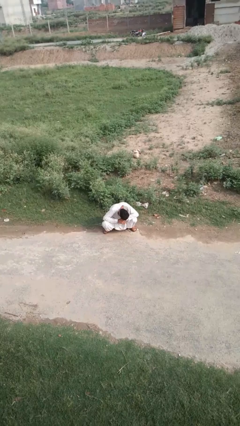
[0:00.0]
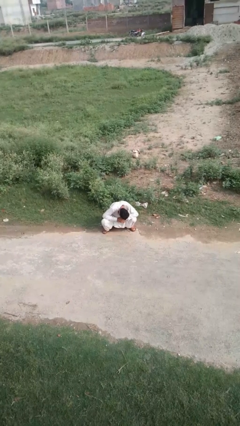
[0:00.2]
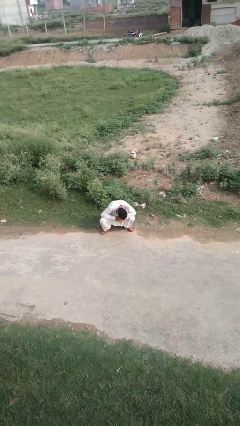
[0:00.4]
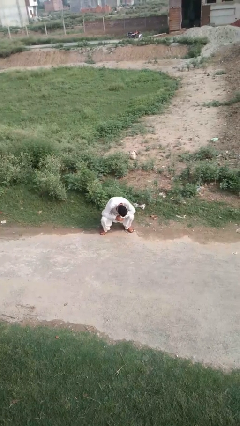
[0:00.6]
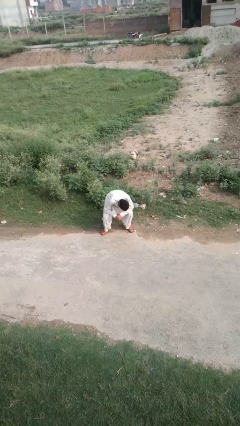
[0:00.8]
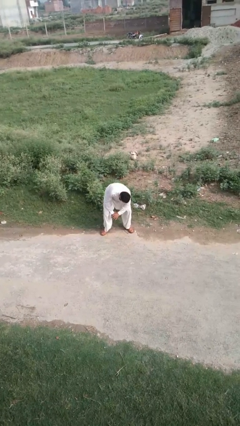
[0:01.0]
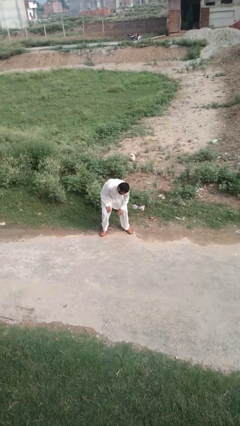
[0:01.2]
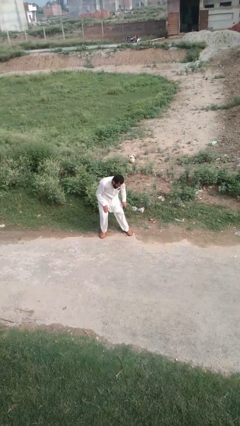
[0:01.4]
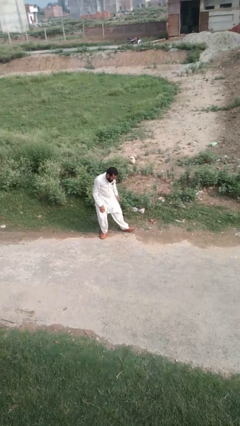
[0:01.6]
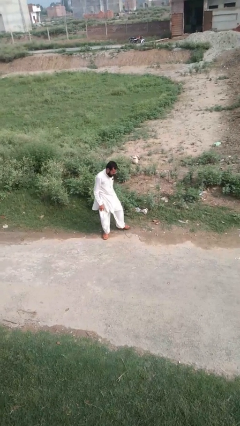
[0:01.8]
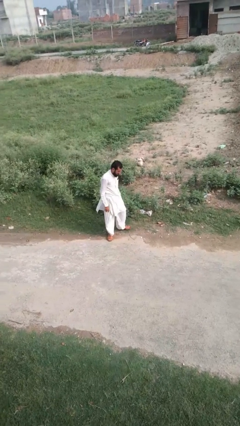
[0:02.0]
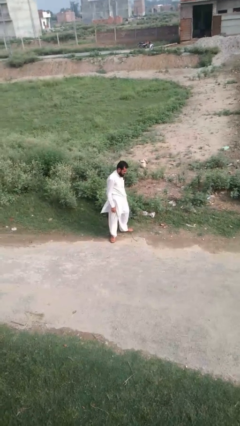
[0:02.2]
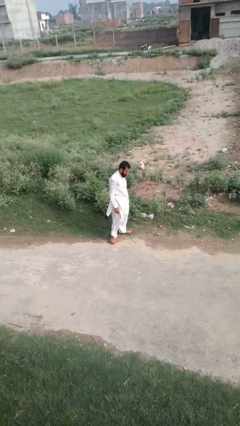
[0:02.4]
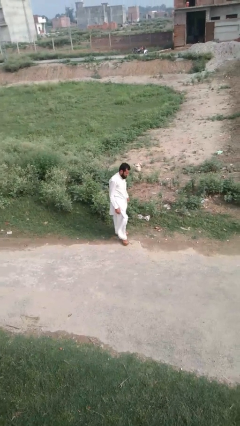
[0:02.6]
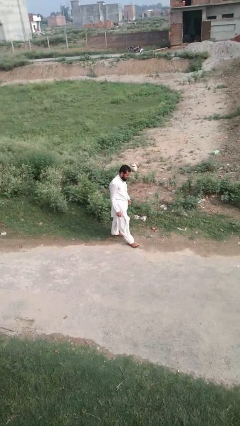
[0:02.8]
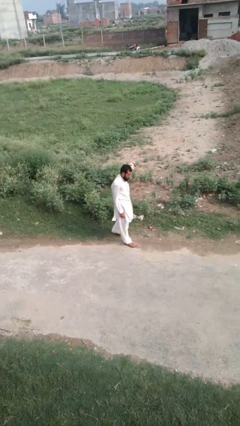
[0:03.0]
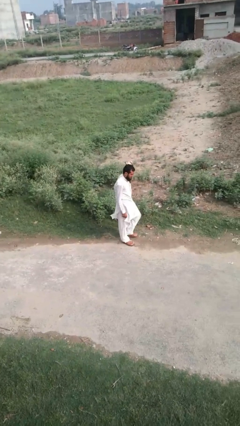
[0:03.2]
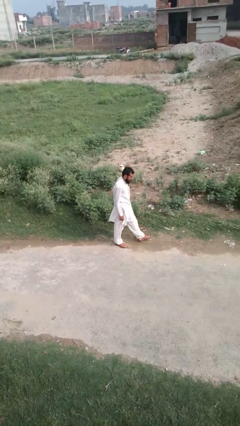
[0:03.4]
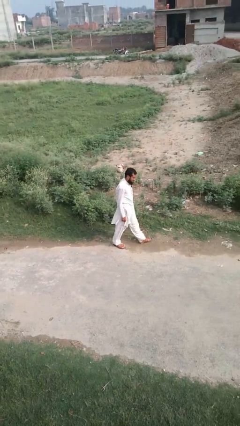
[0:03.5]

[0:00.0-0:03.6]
person stands up from floor

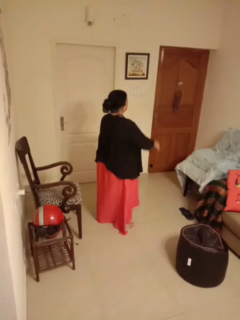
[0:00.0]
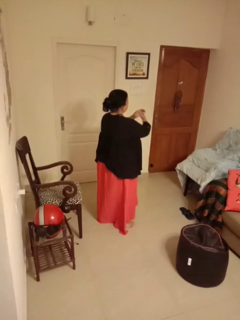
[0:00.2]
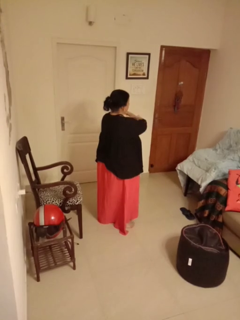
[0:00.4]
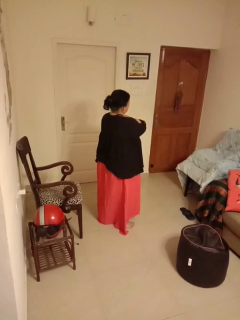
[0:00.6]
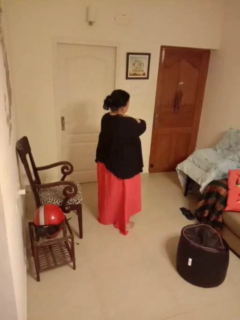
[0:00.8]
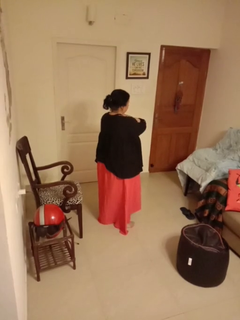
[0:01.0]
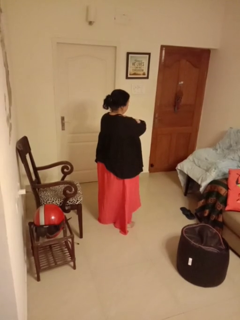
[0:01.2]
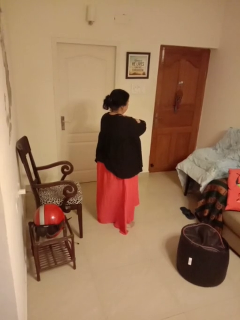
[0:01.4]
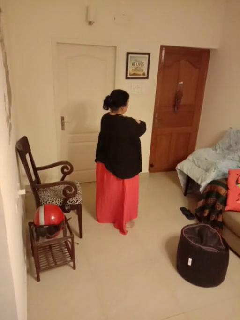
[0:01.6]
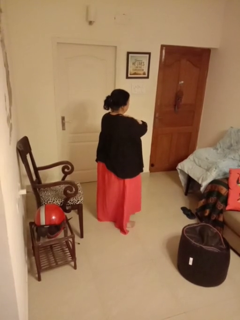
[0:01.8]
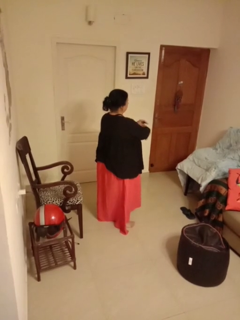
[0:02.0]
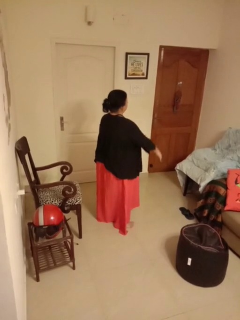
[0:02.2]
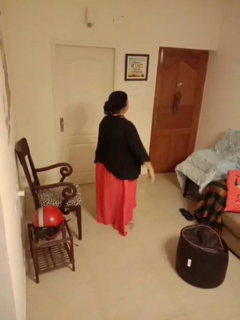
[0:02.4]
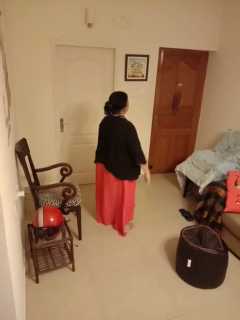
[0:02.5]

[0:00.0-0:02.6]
person gestures arms x

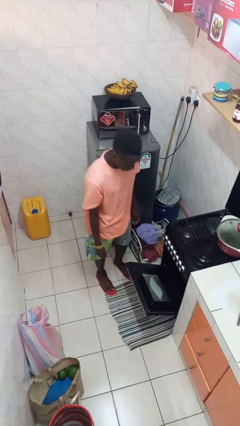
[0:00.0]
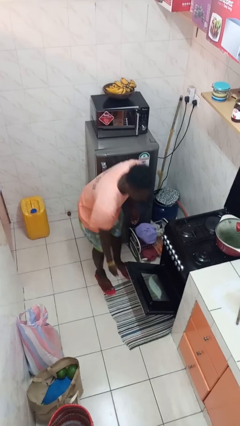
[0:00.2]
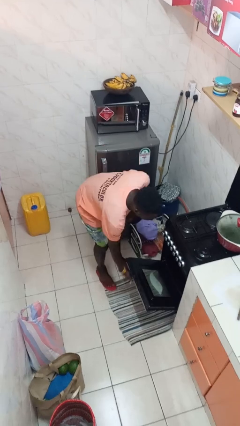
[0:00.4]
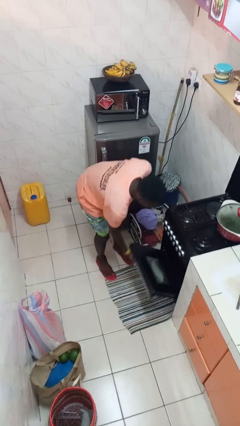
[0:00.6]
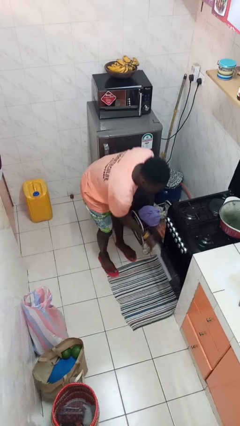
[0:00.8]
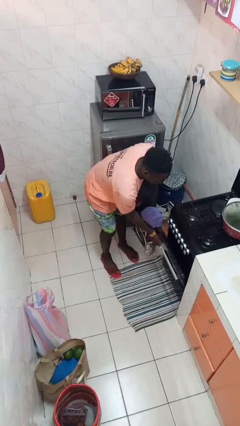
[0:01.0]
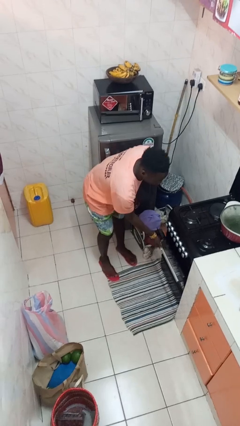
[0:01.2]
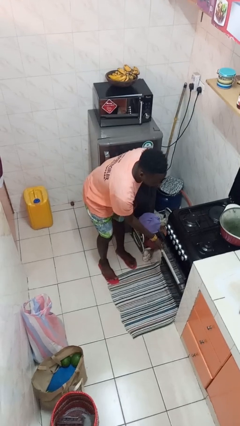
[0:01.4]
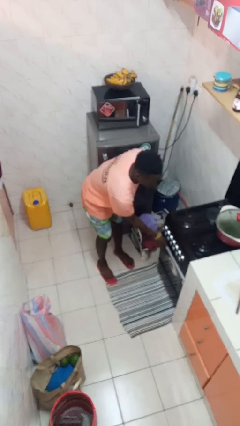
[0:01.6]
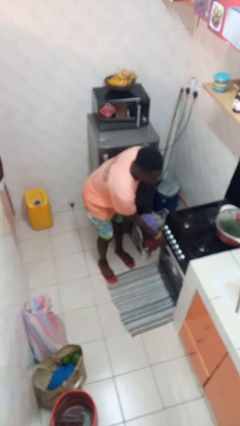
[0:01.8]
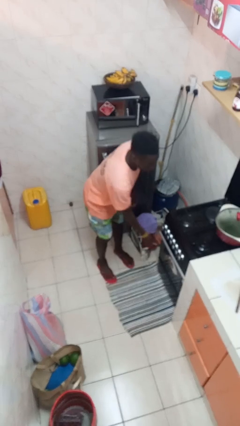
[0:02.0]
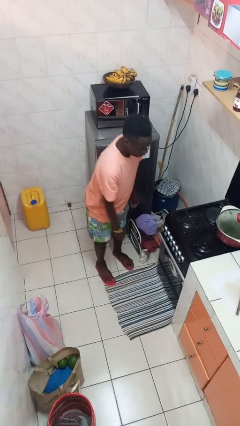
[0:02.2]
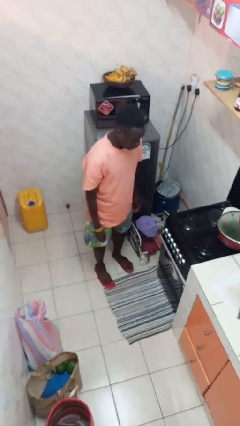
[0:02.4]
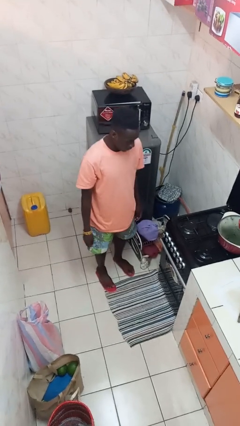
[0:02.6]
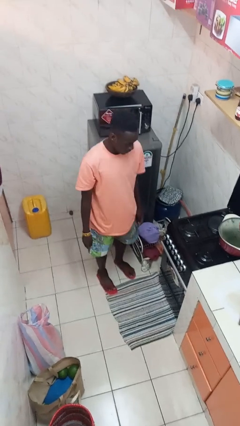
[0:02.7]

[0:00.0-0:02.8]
person closes oven door

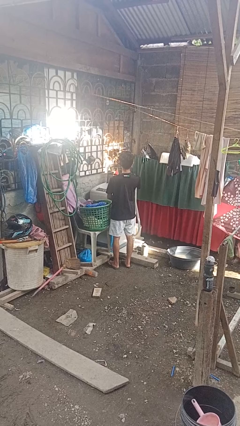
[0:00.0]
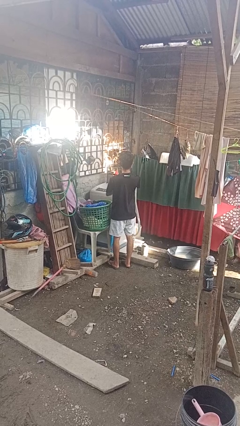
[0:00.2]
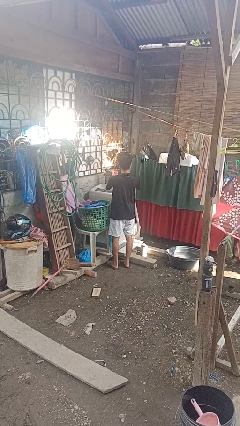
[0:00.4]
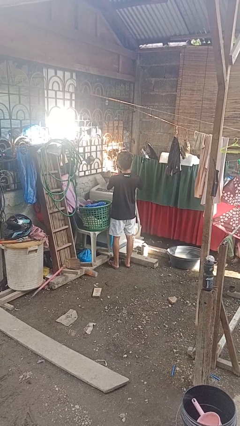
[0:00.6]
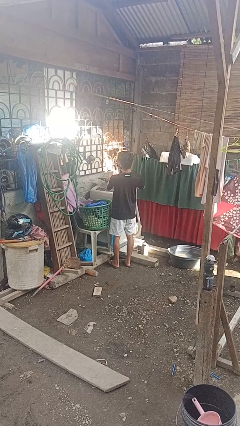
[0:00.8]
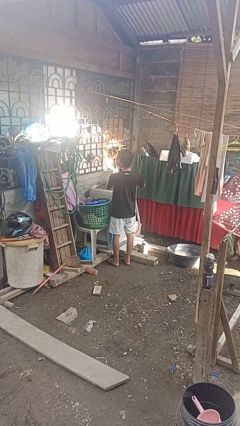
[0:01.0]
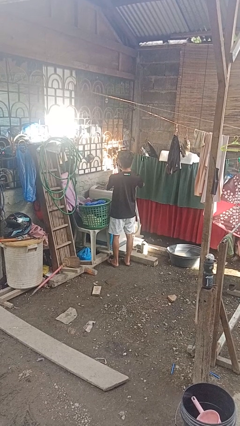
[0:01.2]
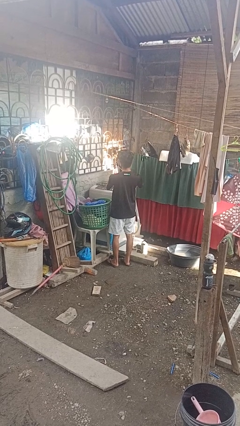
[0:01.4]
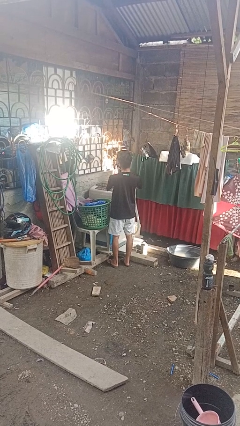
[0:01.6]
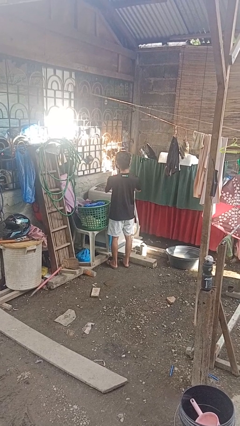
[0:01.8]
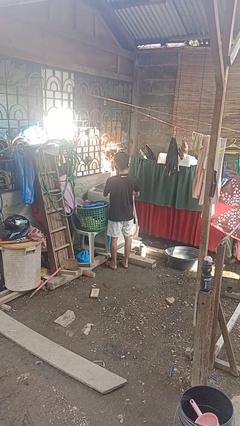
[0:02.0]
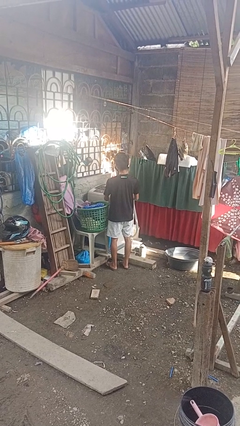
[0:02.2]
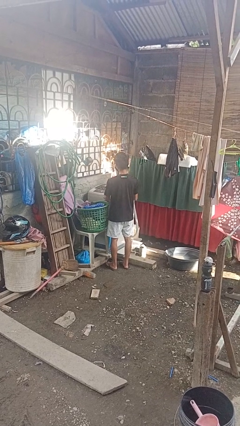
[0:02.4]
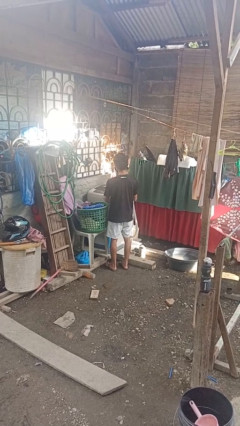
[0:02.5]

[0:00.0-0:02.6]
person closes clothes washer

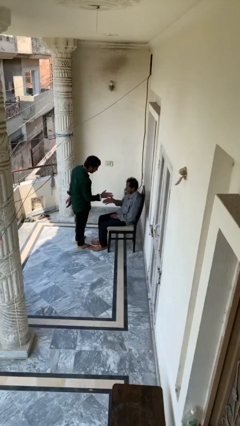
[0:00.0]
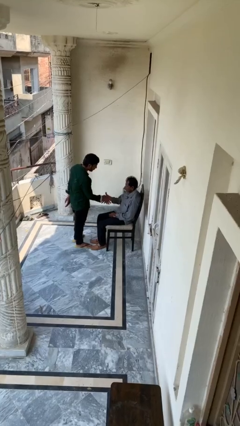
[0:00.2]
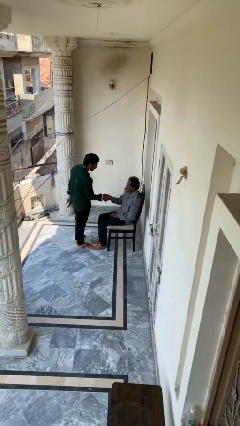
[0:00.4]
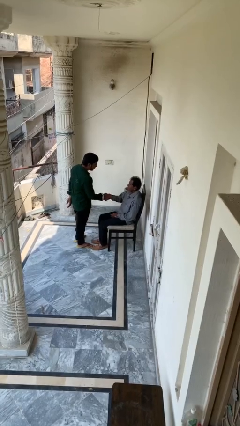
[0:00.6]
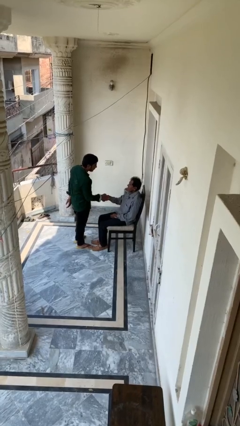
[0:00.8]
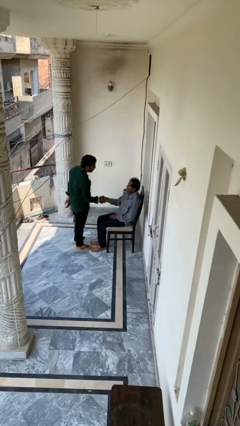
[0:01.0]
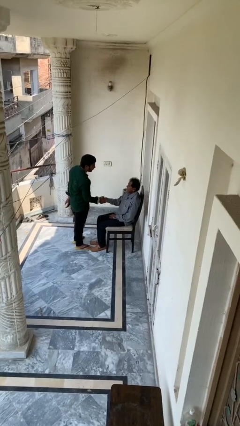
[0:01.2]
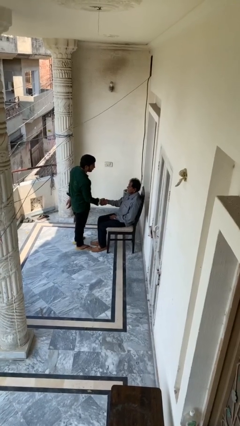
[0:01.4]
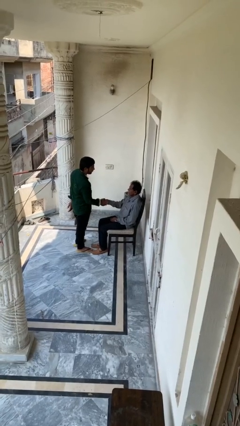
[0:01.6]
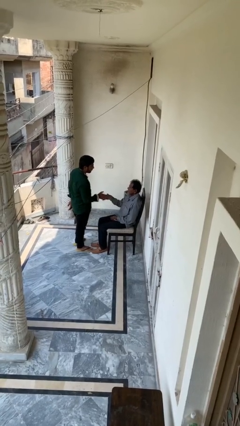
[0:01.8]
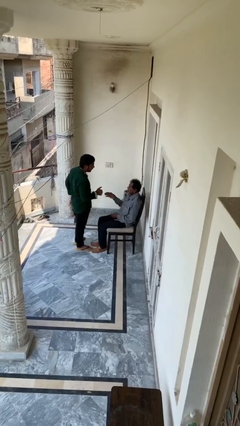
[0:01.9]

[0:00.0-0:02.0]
person shakes hand

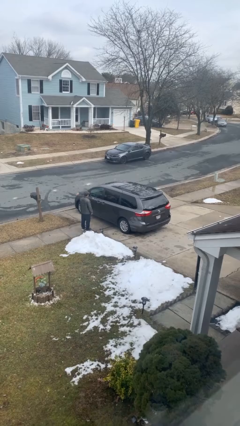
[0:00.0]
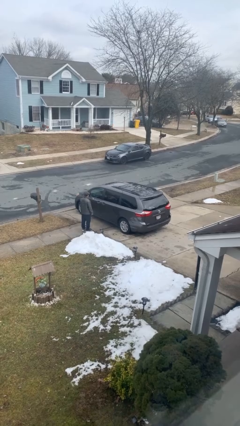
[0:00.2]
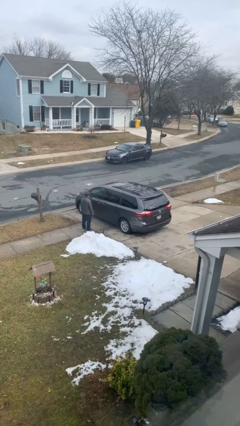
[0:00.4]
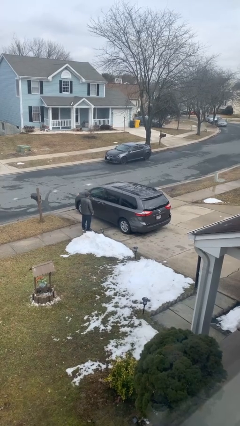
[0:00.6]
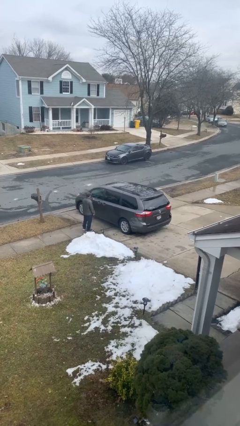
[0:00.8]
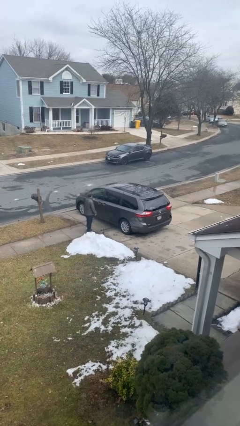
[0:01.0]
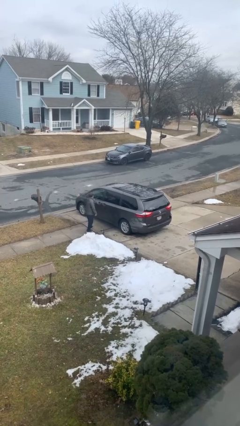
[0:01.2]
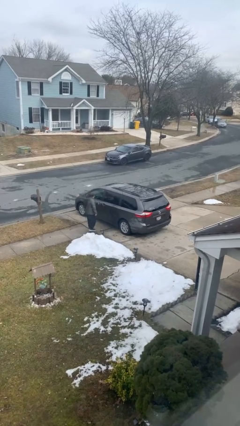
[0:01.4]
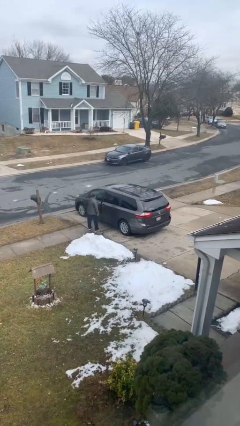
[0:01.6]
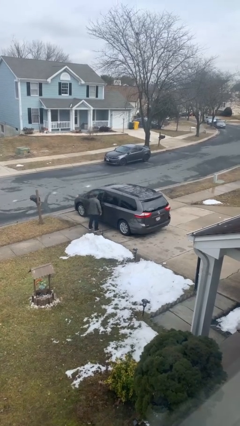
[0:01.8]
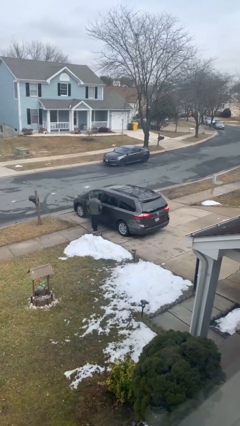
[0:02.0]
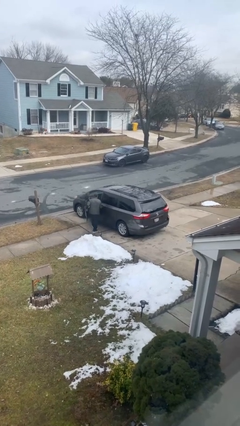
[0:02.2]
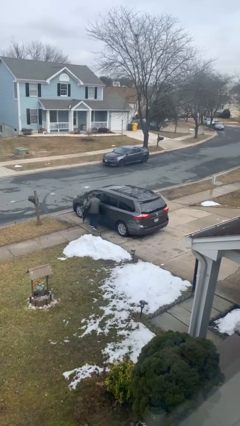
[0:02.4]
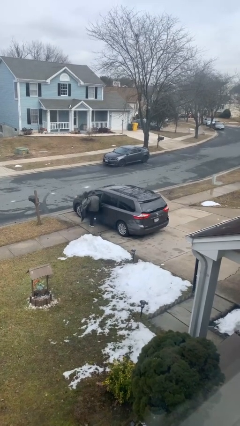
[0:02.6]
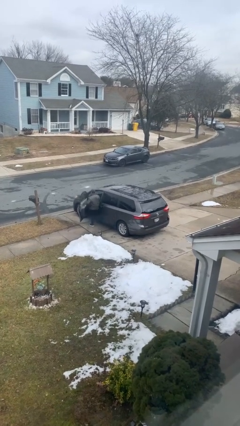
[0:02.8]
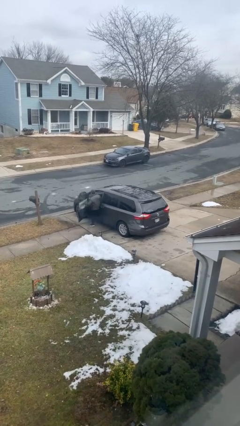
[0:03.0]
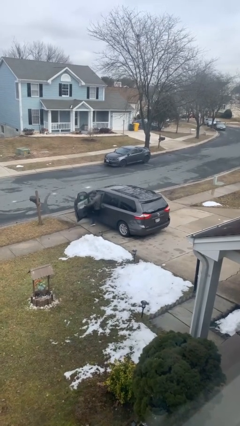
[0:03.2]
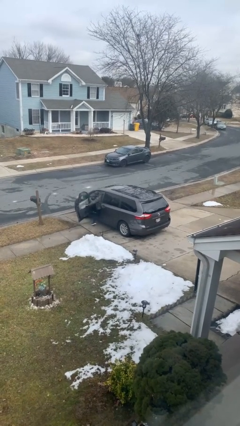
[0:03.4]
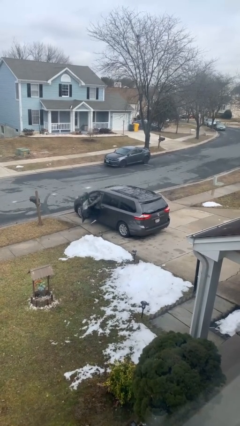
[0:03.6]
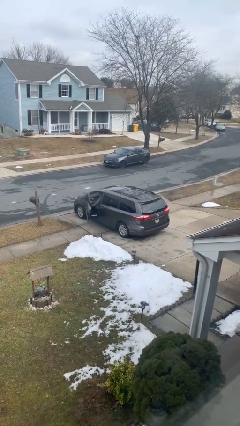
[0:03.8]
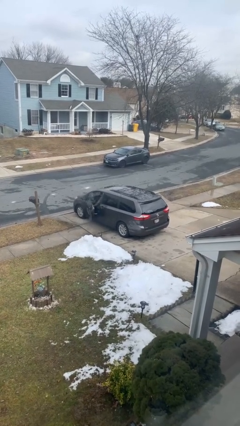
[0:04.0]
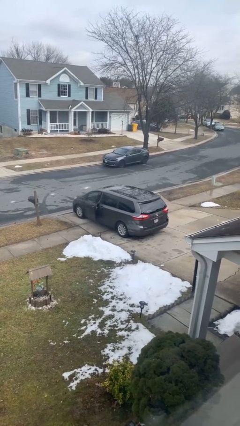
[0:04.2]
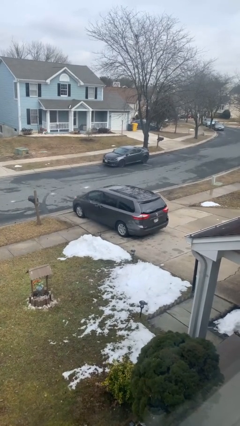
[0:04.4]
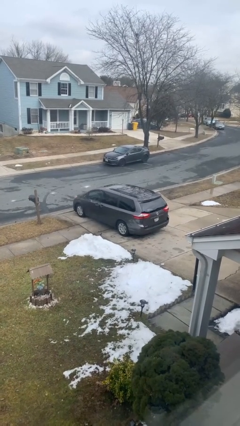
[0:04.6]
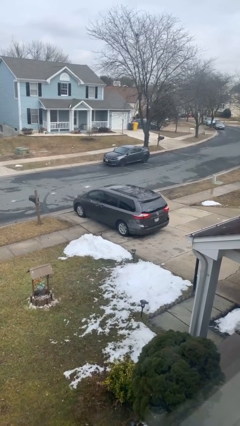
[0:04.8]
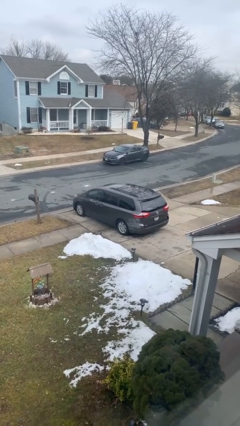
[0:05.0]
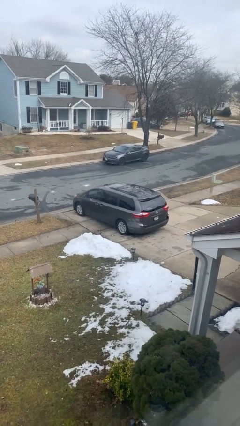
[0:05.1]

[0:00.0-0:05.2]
car picks up person
